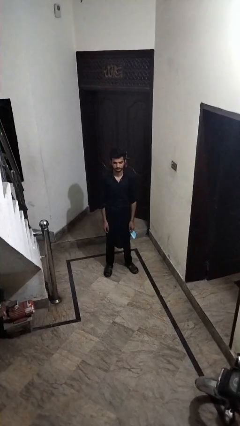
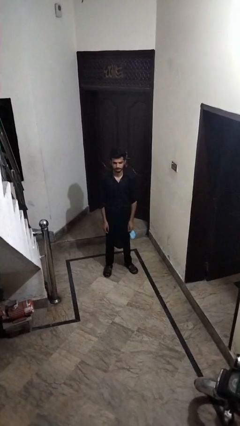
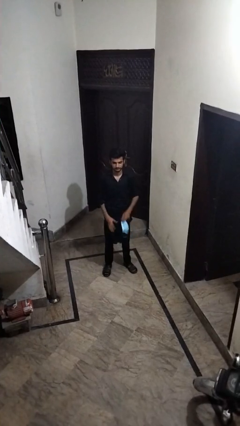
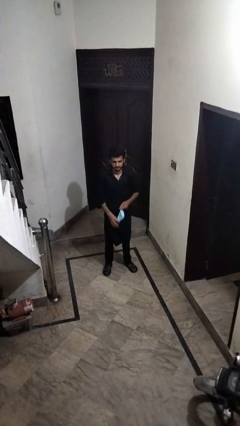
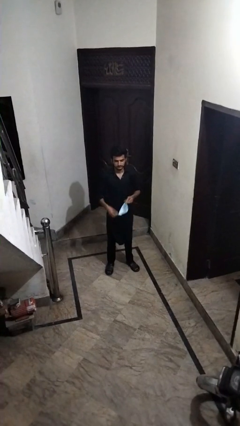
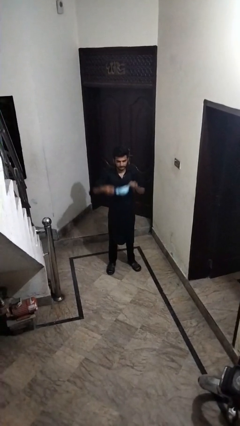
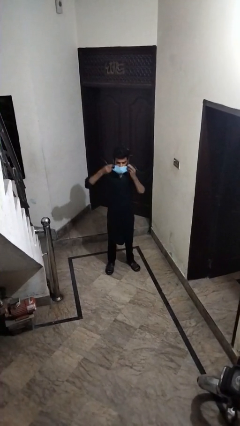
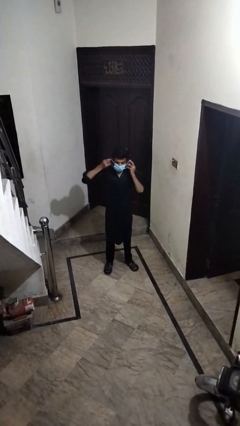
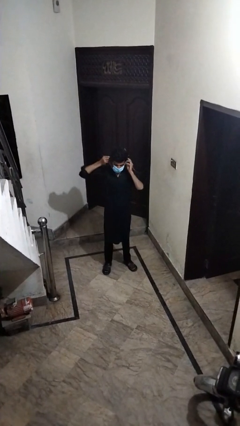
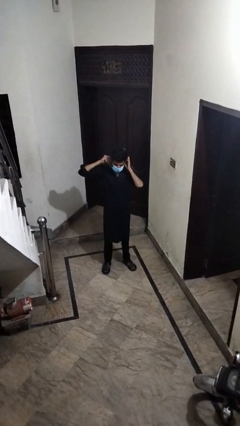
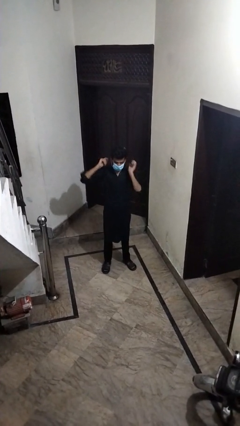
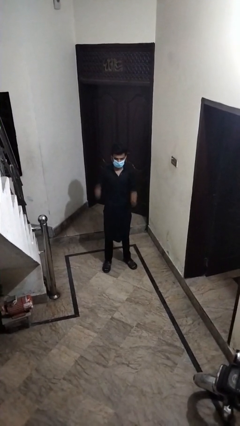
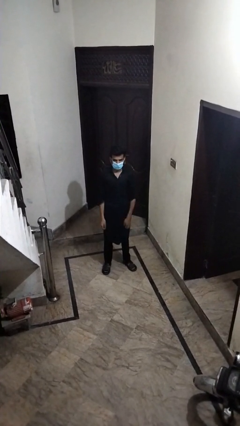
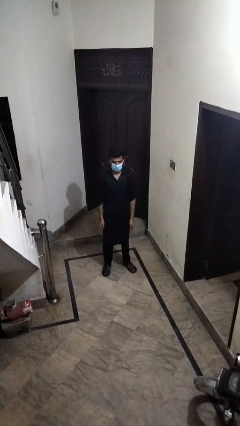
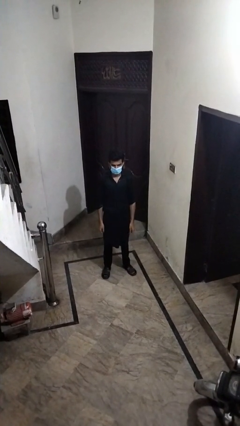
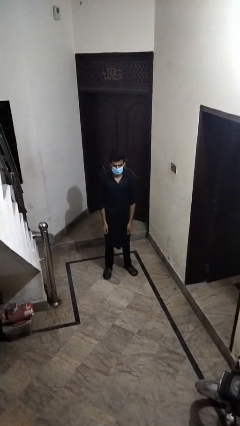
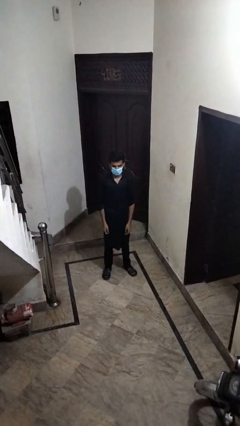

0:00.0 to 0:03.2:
person puts on facemask

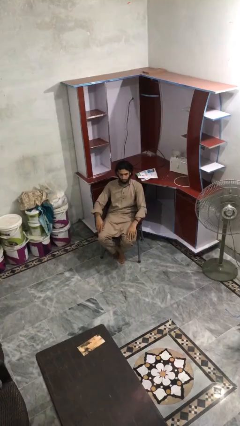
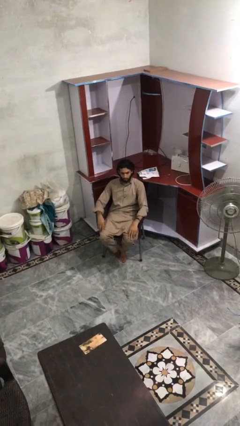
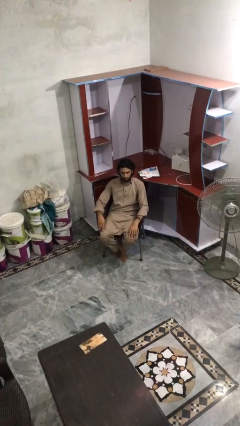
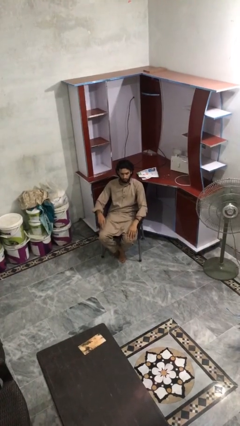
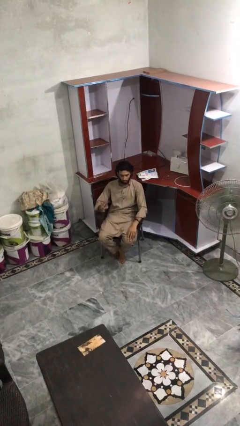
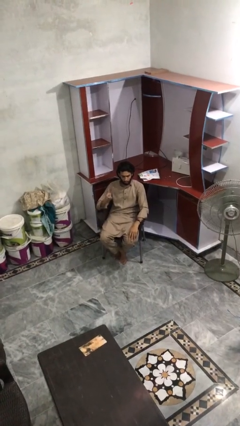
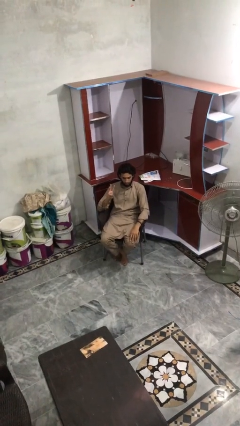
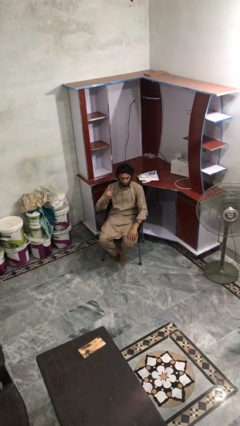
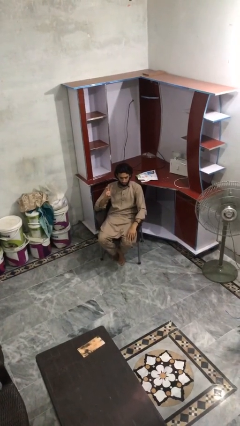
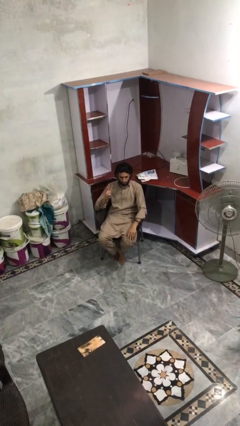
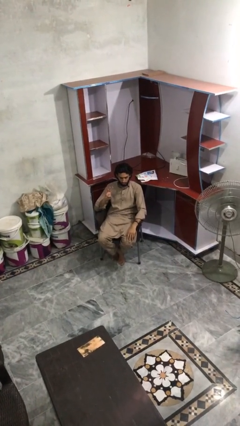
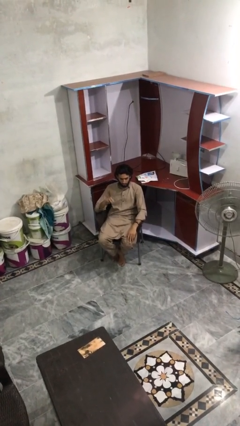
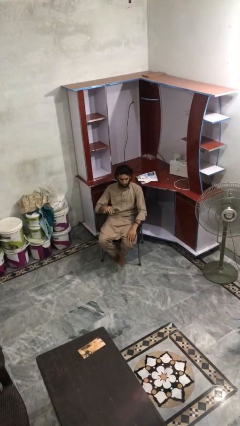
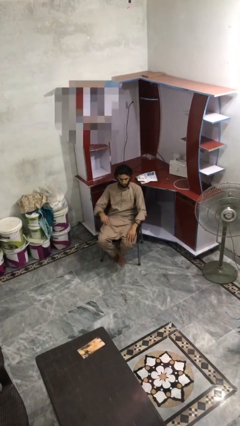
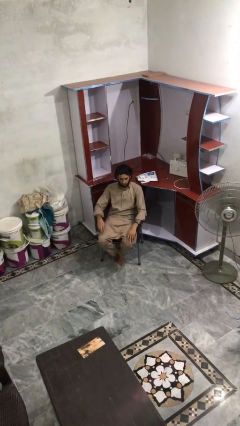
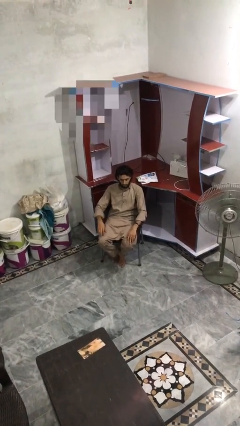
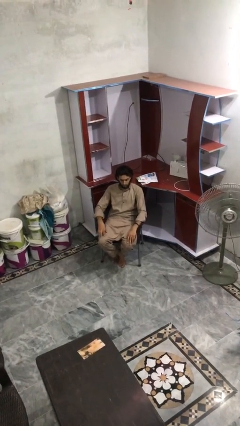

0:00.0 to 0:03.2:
person gestures number three

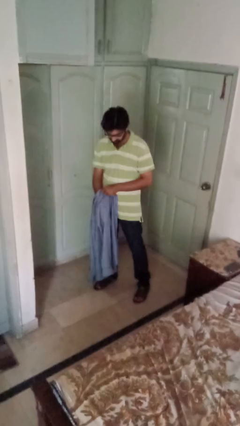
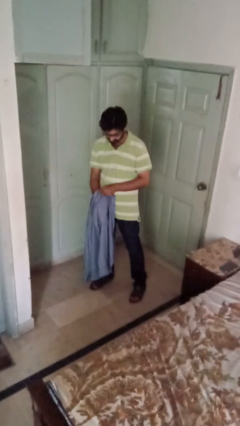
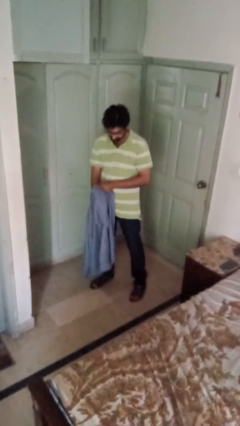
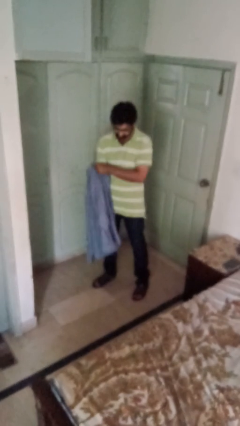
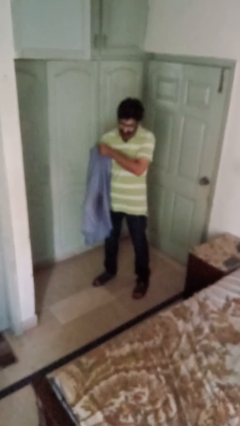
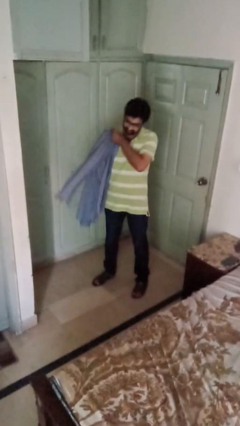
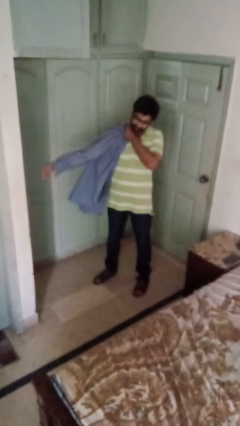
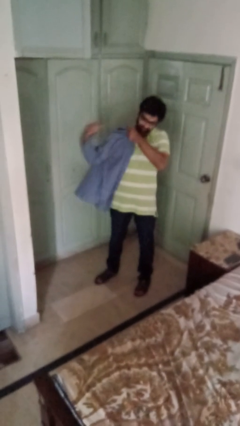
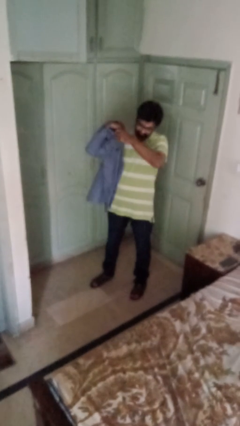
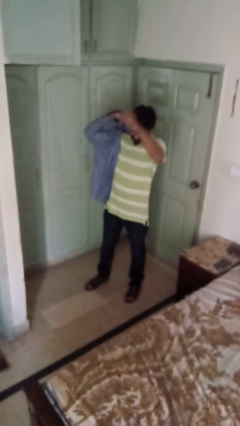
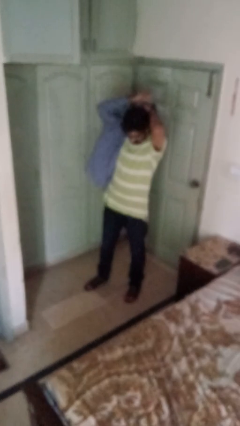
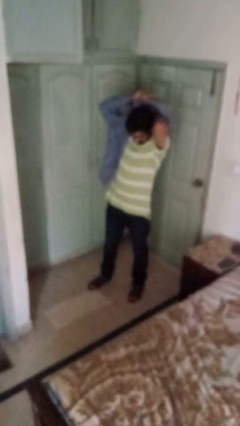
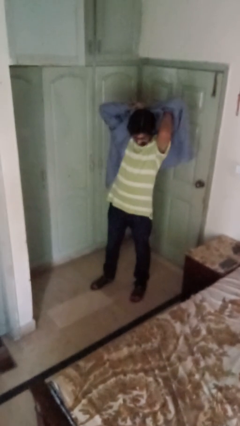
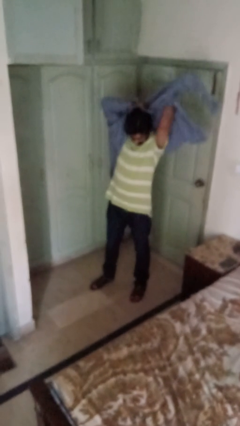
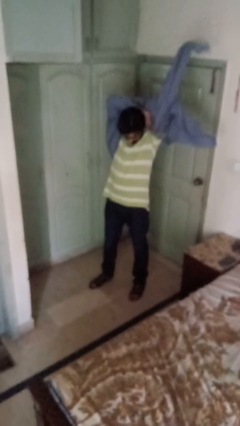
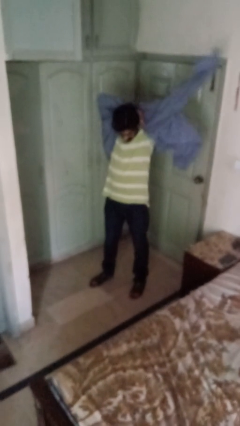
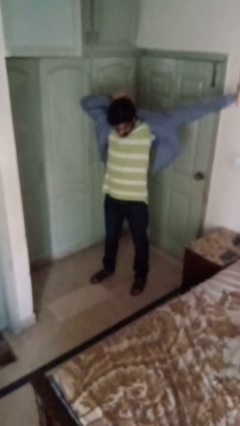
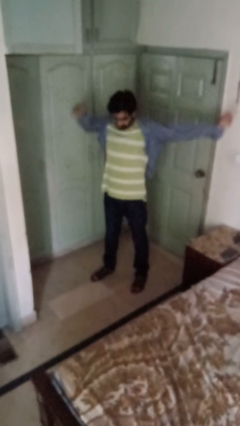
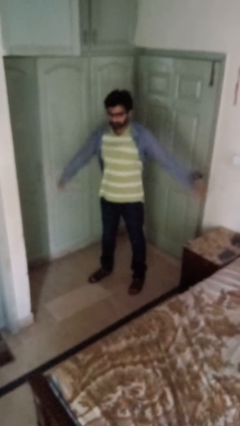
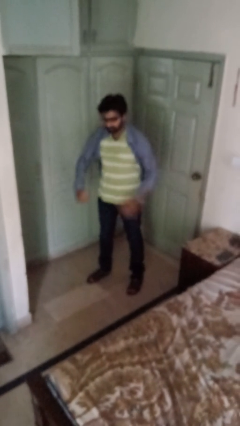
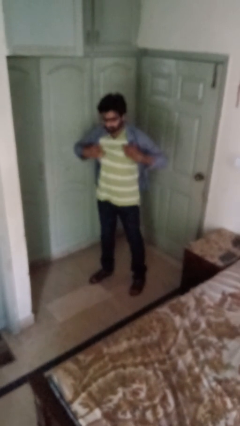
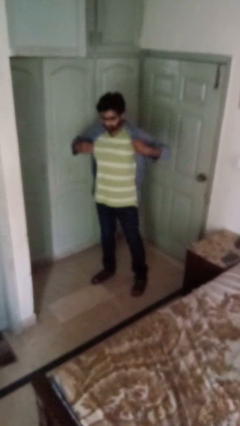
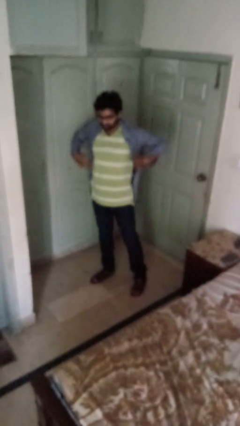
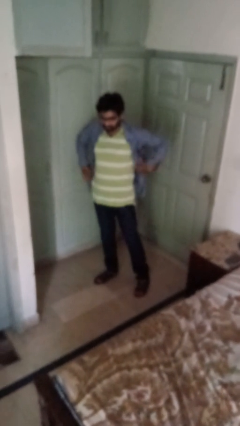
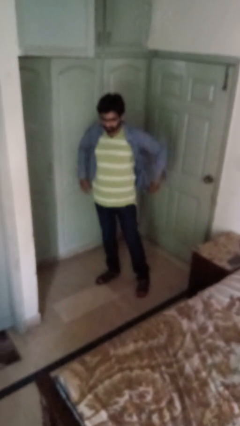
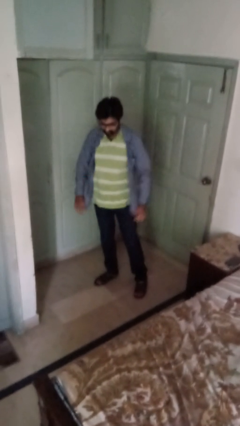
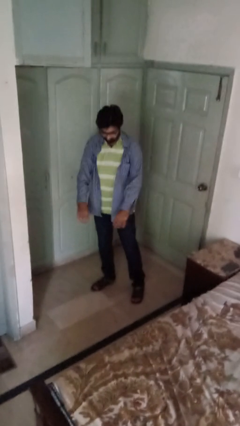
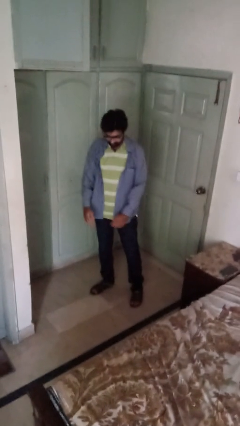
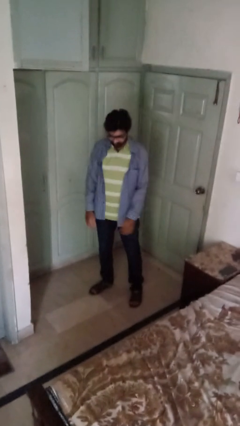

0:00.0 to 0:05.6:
person puts on shirt

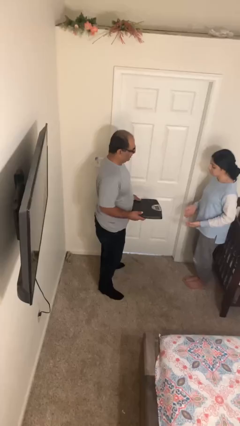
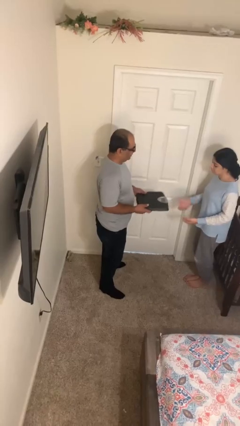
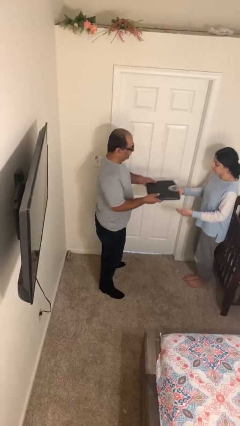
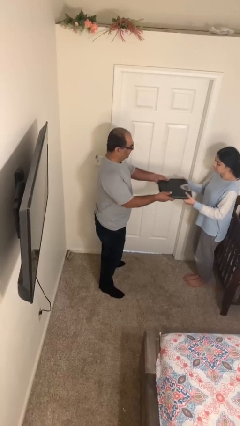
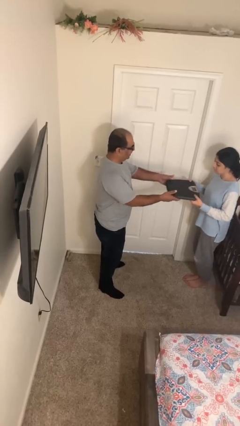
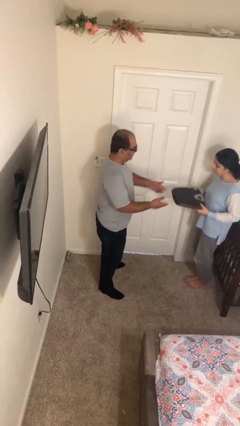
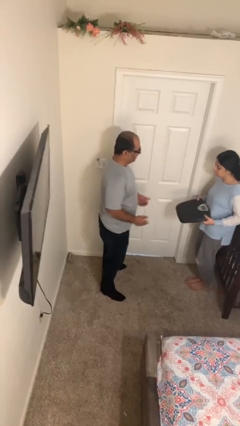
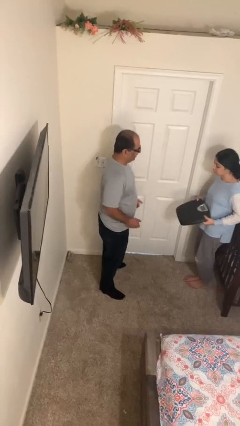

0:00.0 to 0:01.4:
person transfers object to person

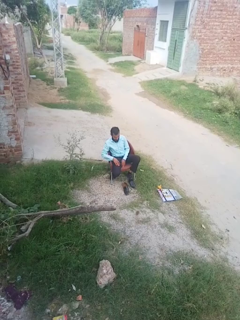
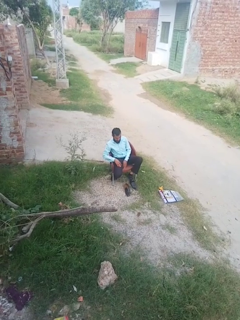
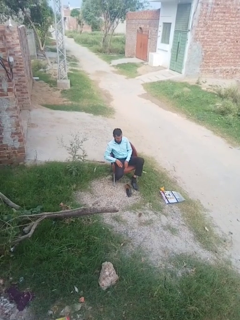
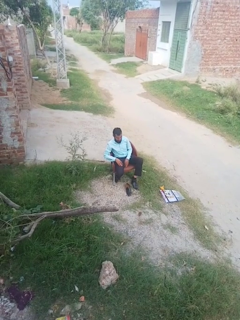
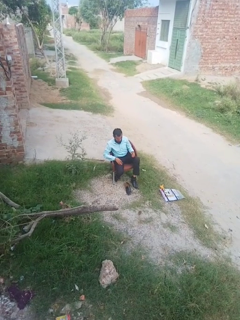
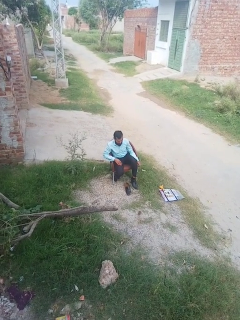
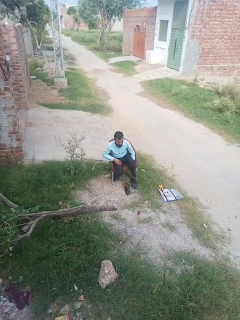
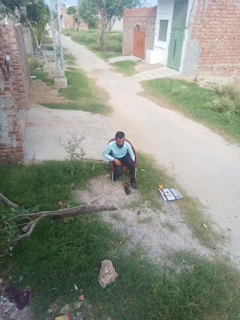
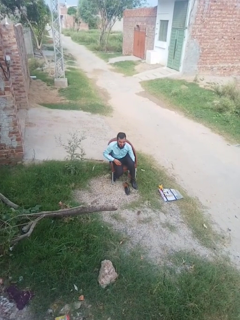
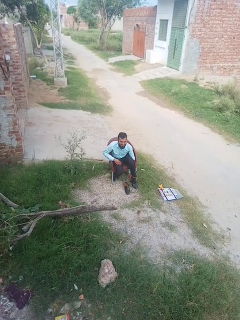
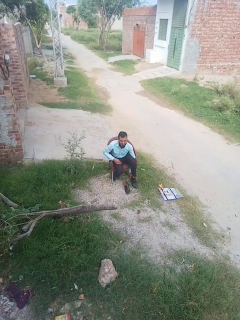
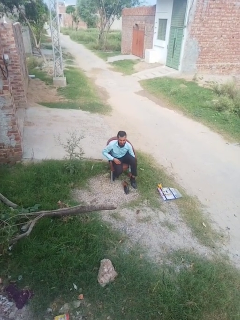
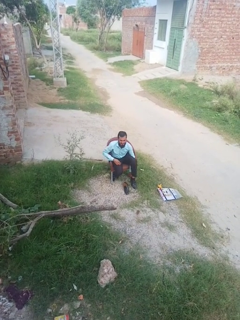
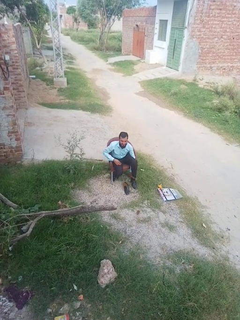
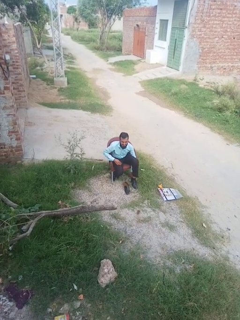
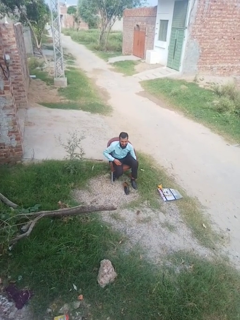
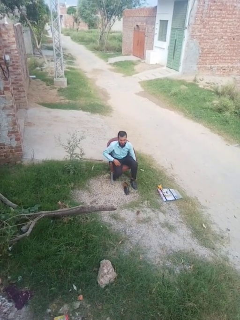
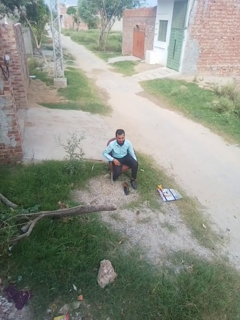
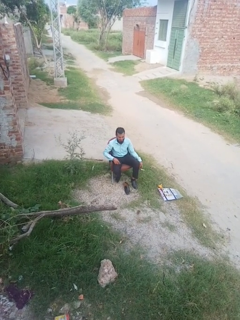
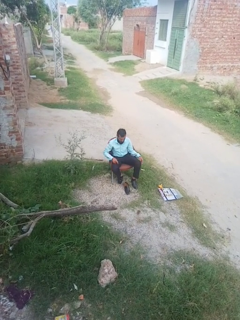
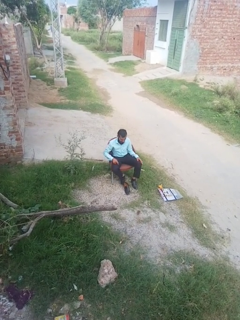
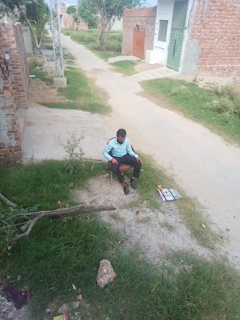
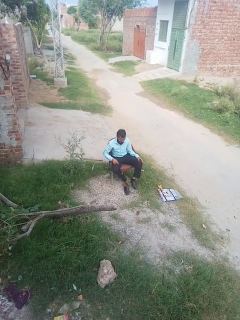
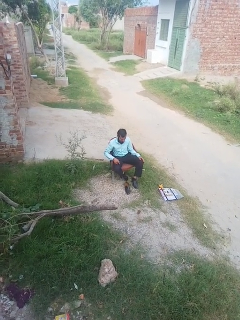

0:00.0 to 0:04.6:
person puts on shoes

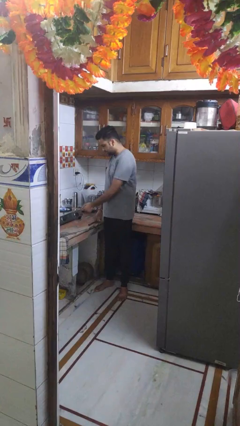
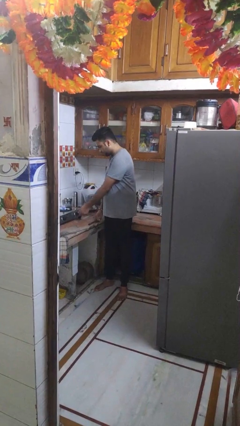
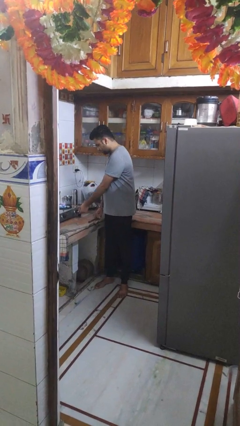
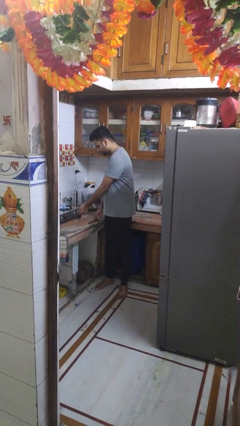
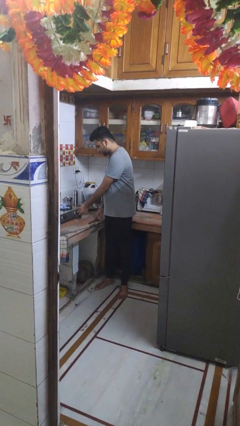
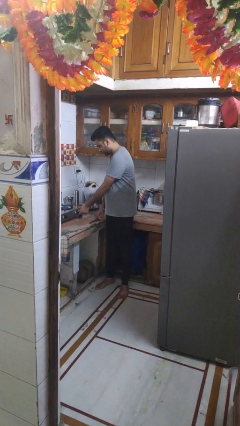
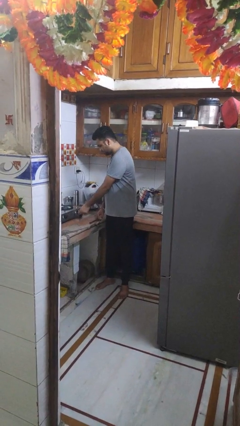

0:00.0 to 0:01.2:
person turns off stovetop
